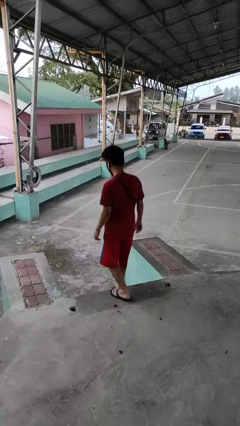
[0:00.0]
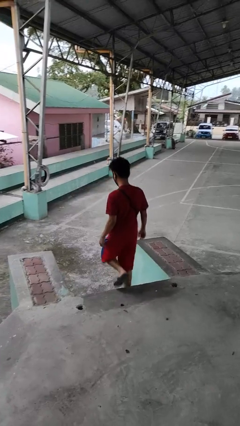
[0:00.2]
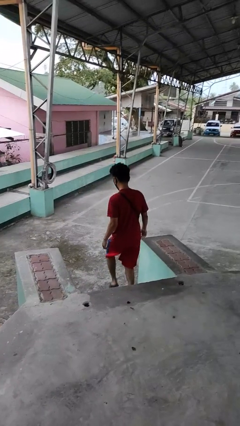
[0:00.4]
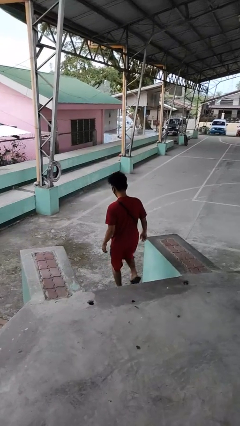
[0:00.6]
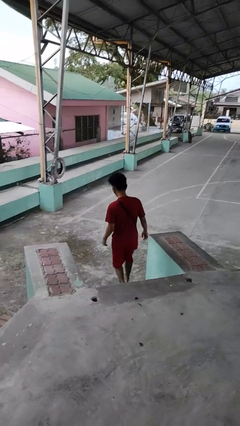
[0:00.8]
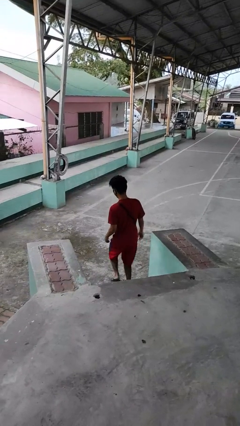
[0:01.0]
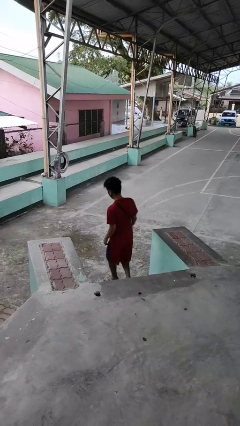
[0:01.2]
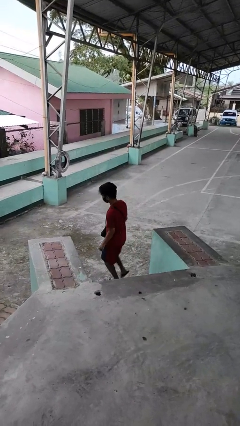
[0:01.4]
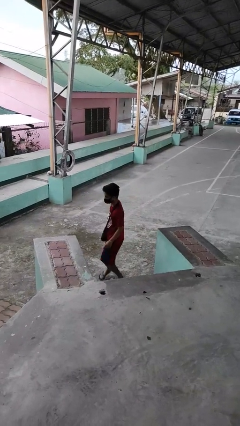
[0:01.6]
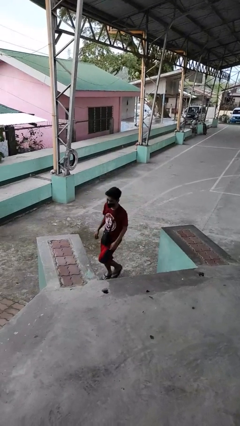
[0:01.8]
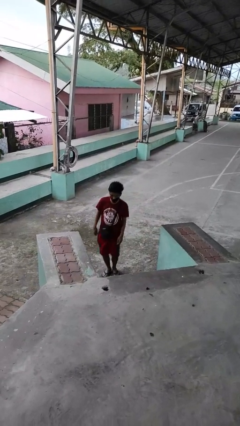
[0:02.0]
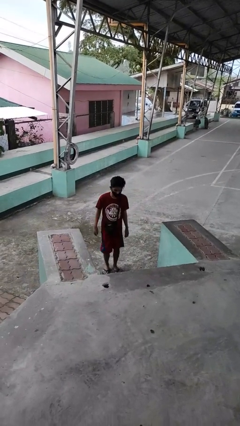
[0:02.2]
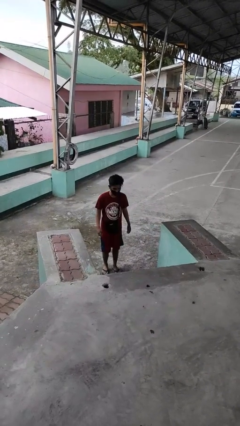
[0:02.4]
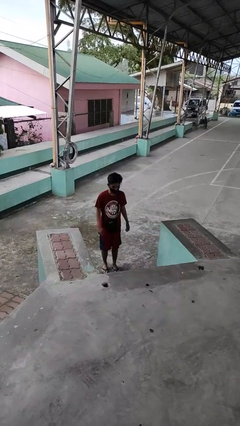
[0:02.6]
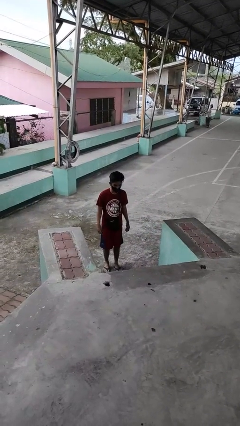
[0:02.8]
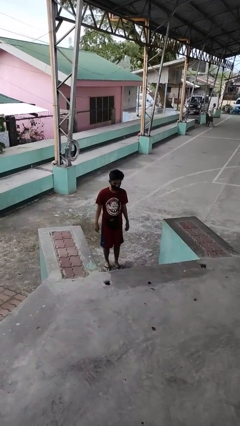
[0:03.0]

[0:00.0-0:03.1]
person climbs down stairs

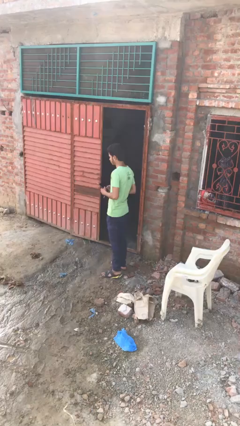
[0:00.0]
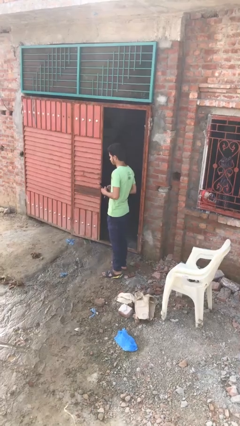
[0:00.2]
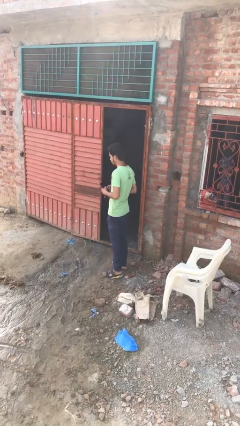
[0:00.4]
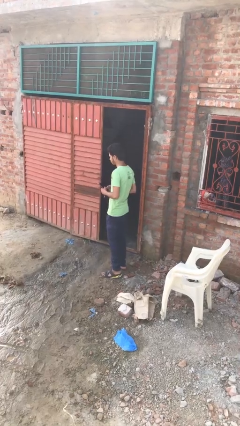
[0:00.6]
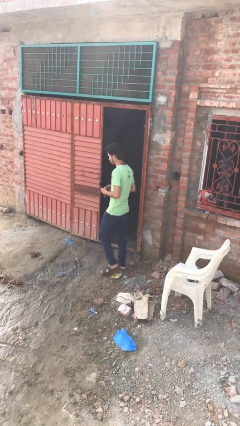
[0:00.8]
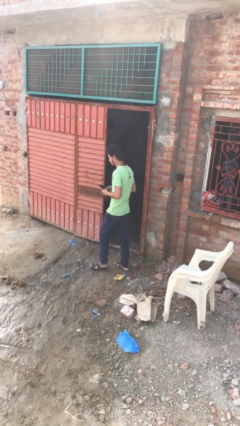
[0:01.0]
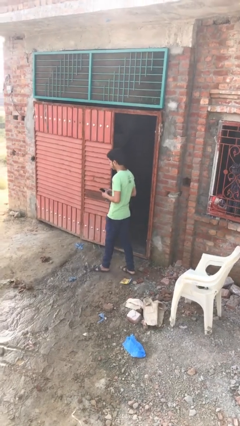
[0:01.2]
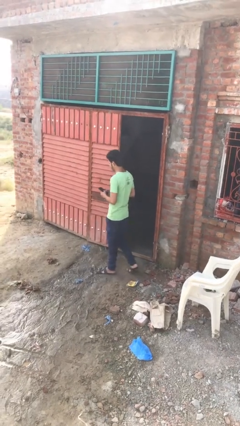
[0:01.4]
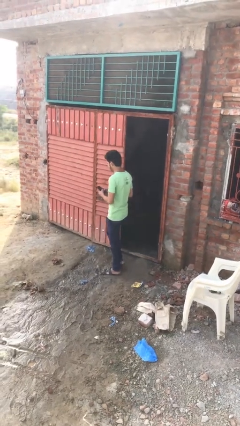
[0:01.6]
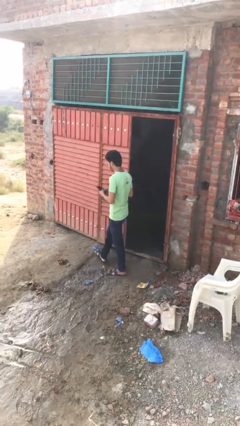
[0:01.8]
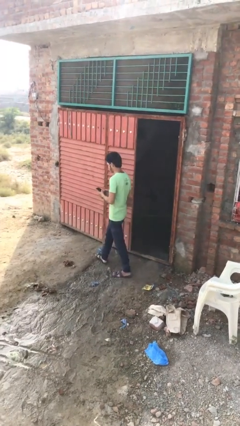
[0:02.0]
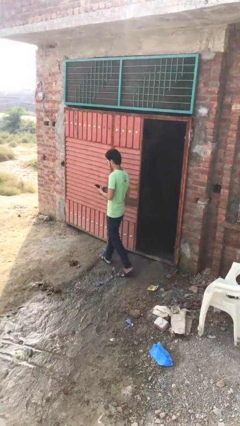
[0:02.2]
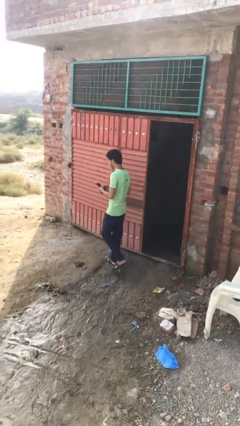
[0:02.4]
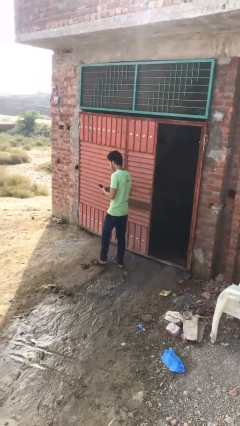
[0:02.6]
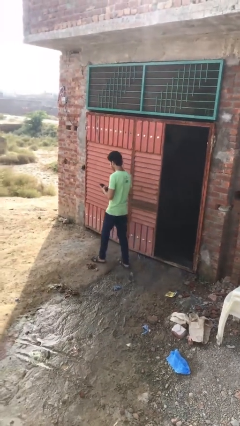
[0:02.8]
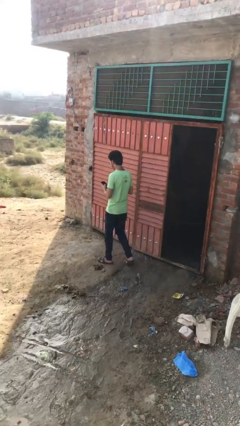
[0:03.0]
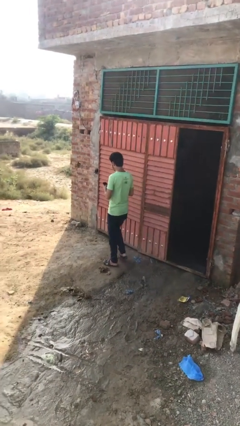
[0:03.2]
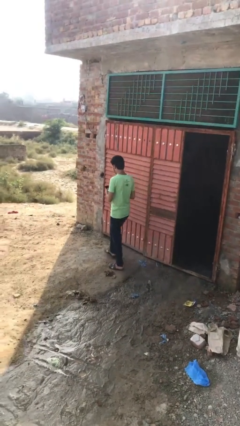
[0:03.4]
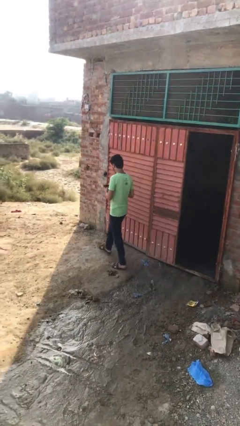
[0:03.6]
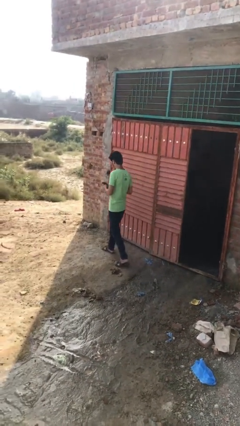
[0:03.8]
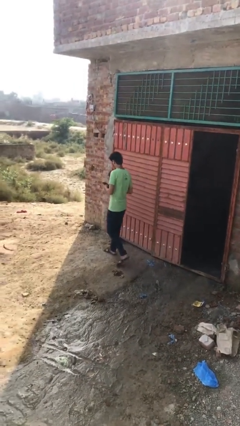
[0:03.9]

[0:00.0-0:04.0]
person texts on phone

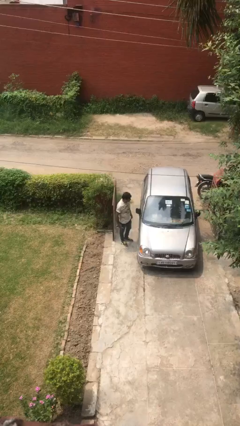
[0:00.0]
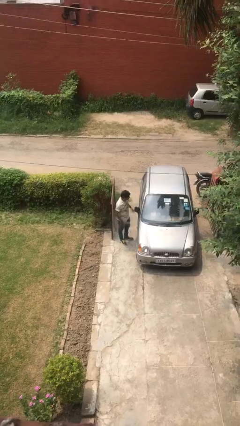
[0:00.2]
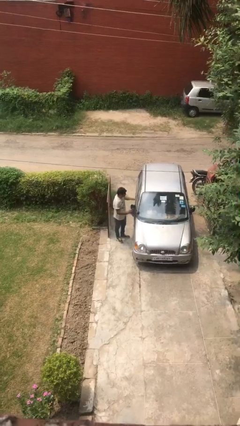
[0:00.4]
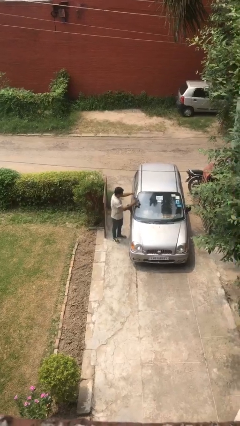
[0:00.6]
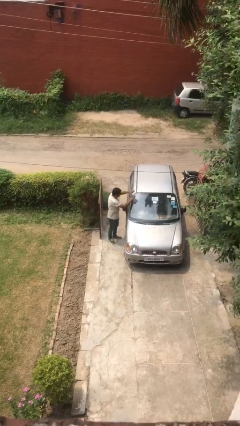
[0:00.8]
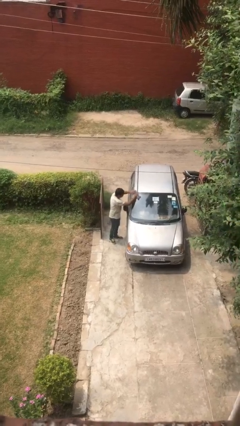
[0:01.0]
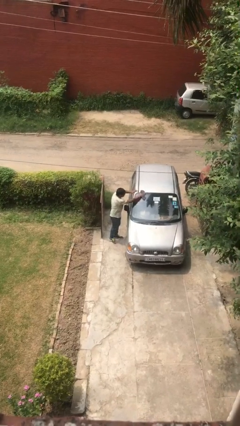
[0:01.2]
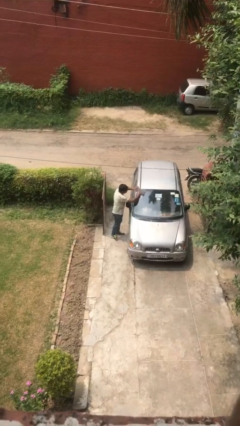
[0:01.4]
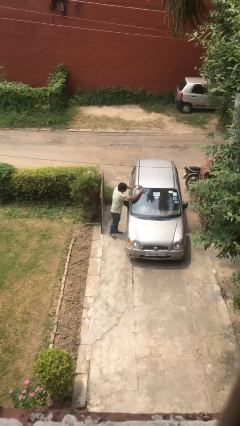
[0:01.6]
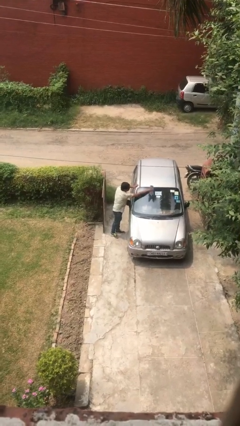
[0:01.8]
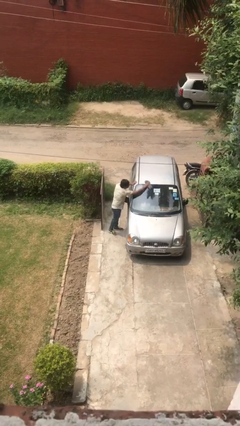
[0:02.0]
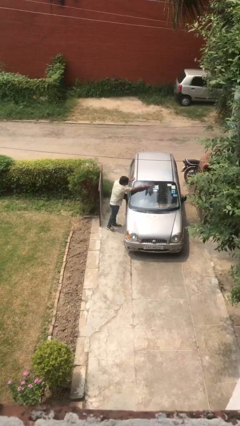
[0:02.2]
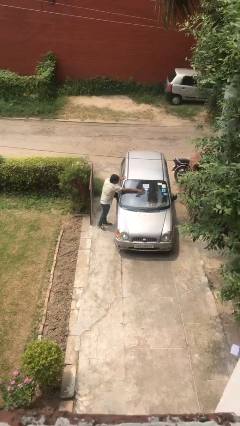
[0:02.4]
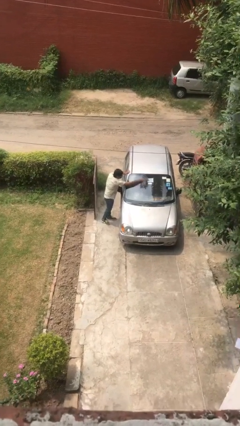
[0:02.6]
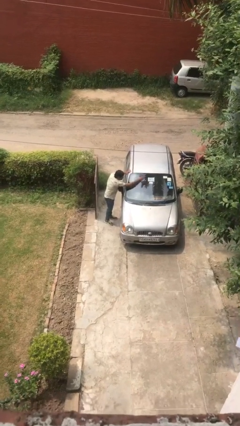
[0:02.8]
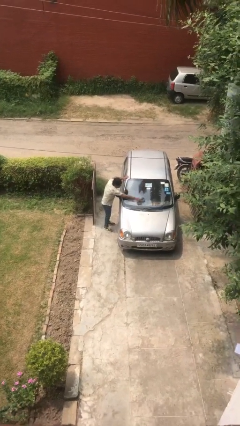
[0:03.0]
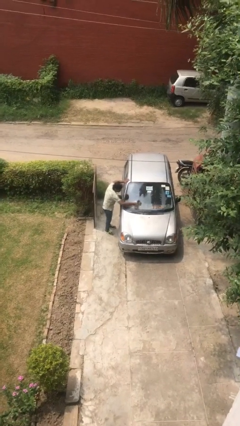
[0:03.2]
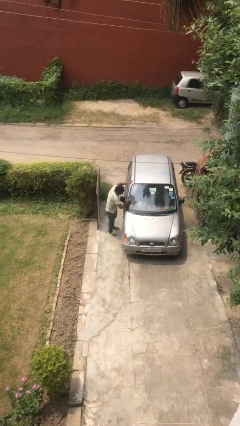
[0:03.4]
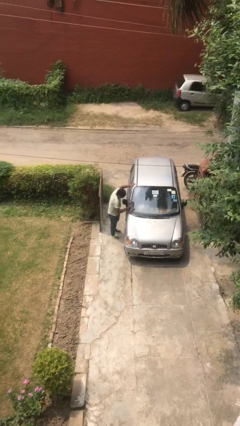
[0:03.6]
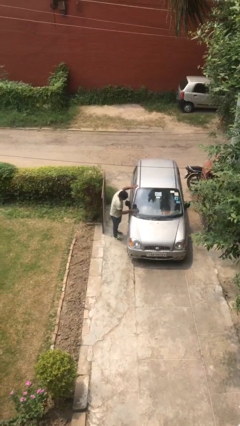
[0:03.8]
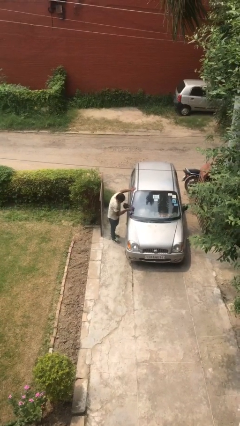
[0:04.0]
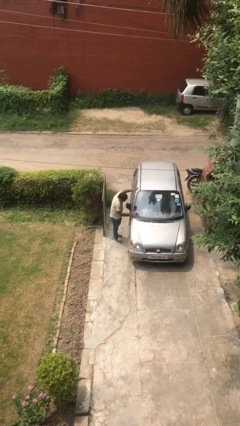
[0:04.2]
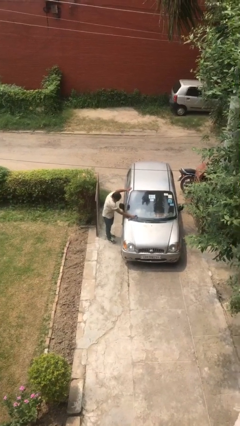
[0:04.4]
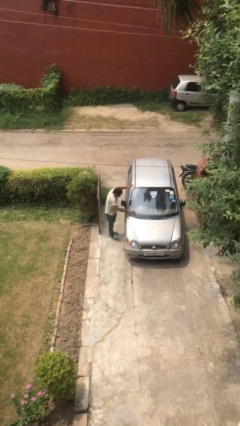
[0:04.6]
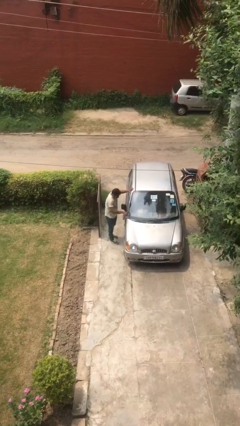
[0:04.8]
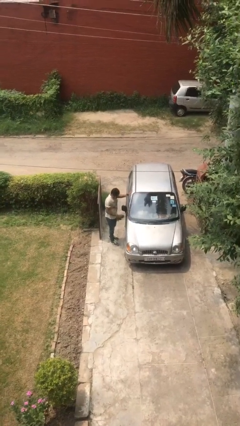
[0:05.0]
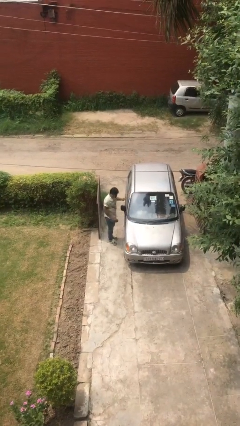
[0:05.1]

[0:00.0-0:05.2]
person polishes car with rag

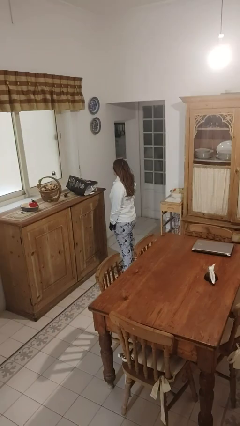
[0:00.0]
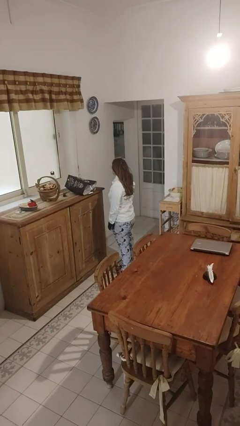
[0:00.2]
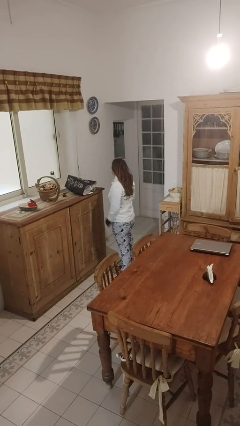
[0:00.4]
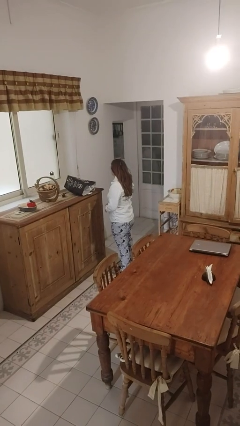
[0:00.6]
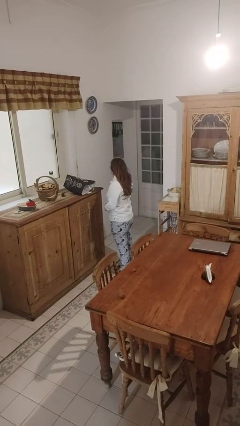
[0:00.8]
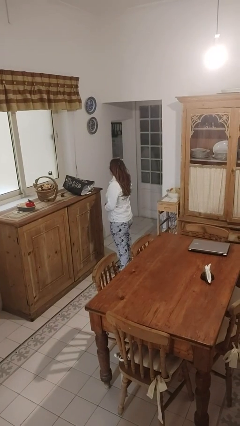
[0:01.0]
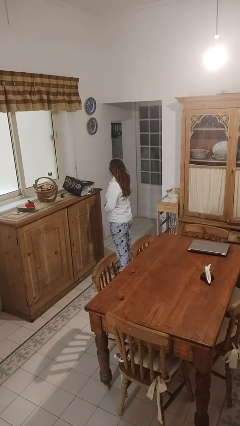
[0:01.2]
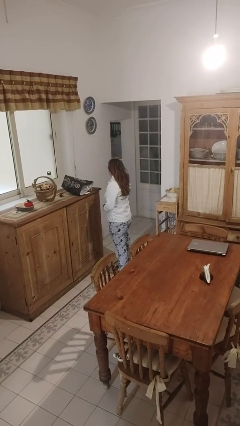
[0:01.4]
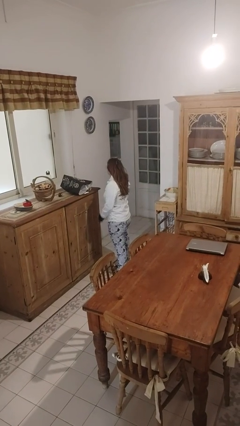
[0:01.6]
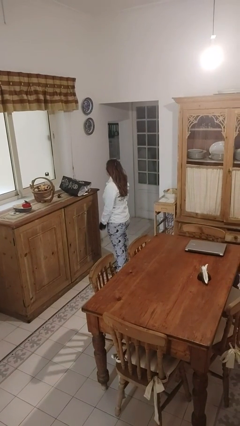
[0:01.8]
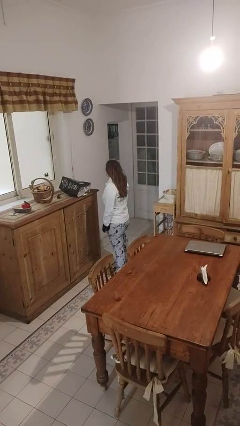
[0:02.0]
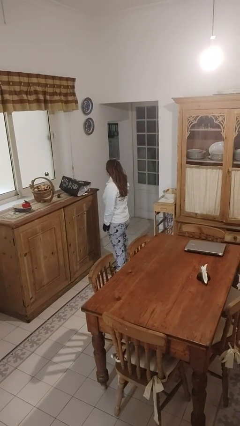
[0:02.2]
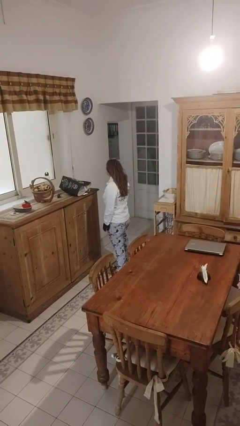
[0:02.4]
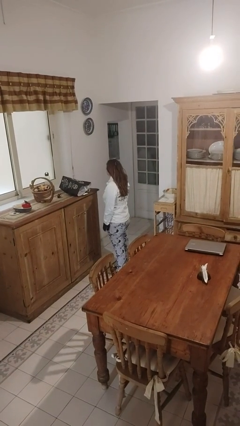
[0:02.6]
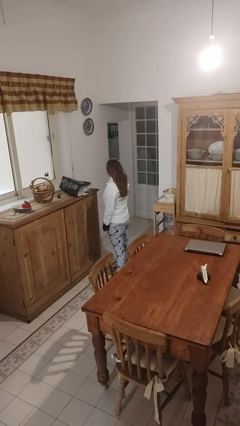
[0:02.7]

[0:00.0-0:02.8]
person buttons shirt

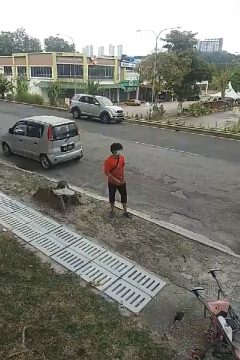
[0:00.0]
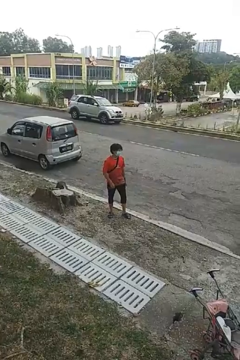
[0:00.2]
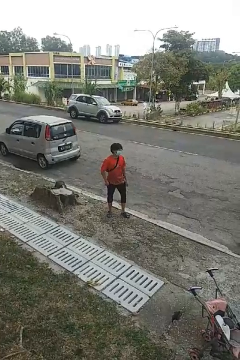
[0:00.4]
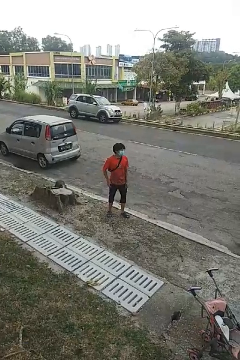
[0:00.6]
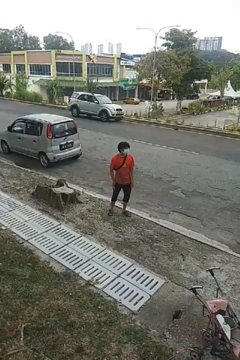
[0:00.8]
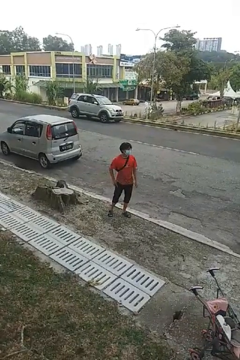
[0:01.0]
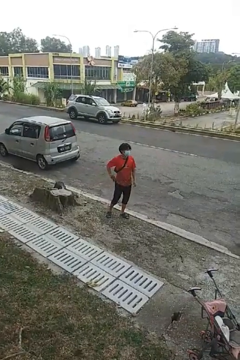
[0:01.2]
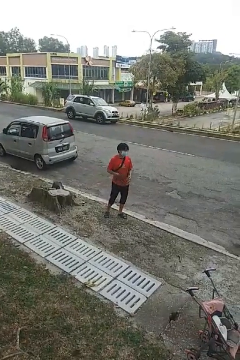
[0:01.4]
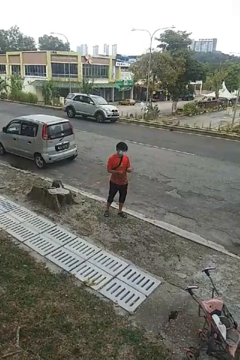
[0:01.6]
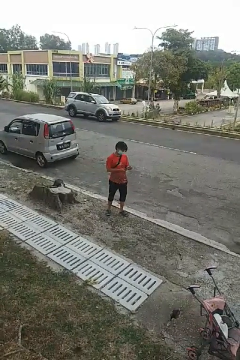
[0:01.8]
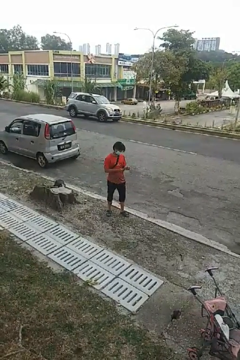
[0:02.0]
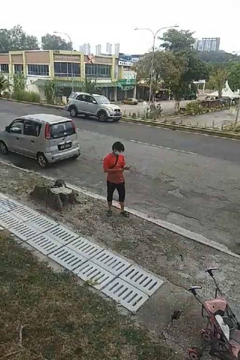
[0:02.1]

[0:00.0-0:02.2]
person takes phone from pocket

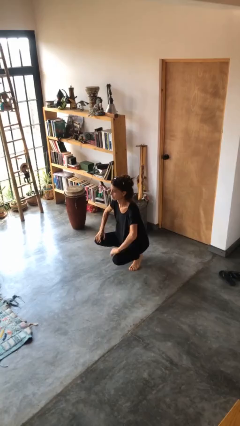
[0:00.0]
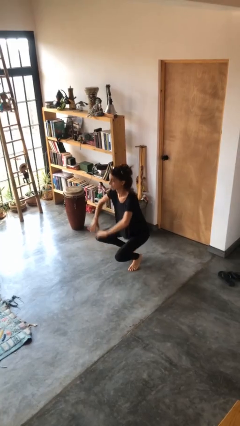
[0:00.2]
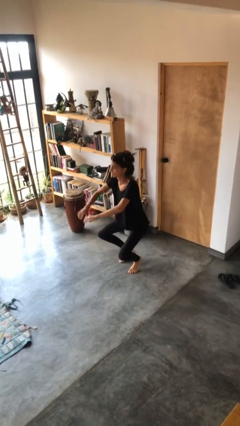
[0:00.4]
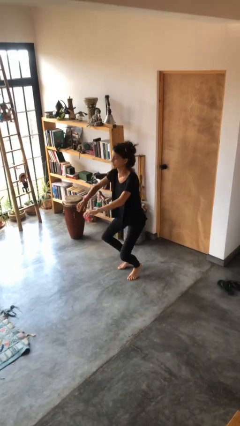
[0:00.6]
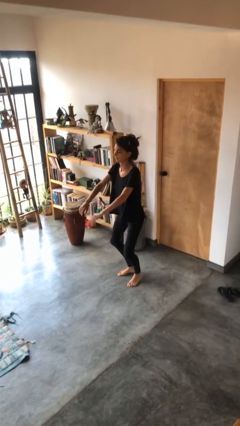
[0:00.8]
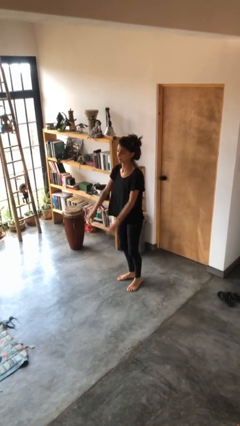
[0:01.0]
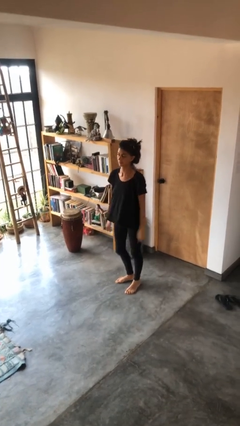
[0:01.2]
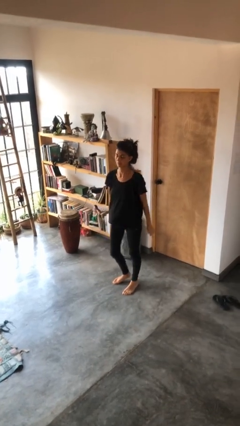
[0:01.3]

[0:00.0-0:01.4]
person stands up
